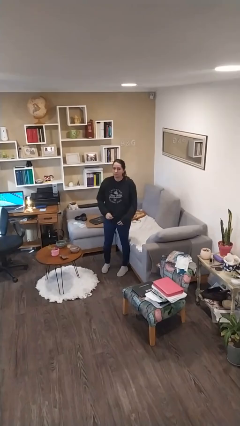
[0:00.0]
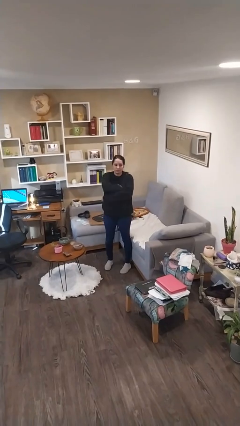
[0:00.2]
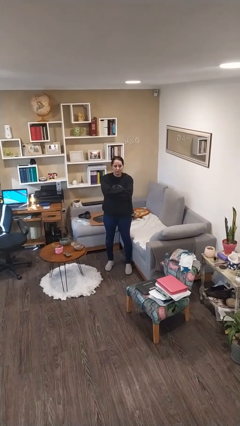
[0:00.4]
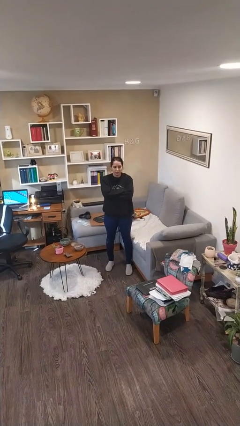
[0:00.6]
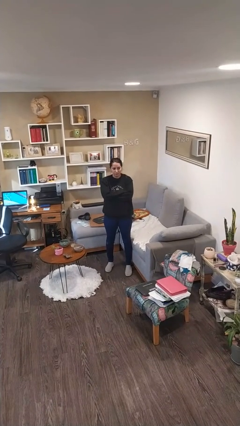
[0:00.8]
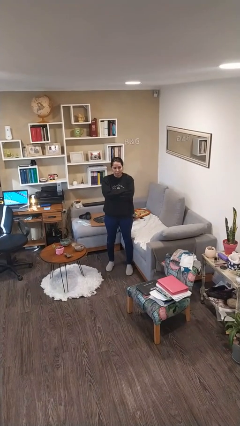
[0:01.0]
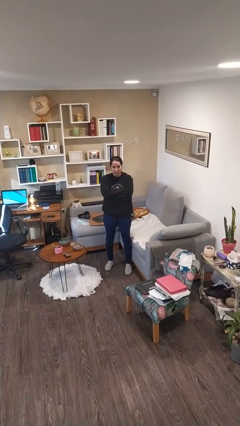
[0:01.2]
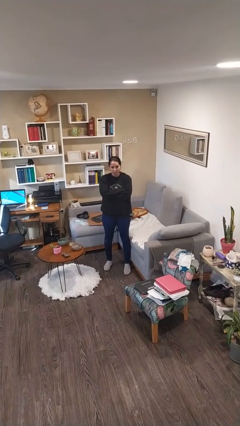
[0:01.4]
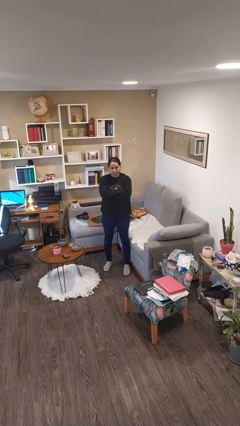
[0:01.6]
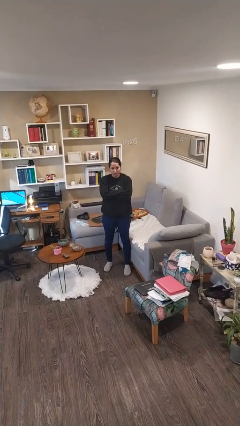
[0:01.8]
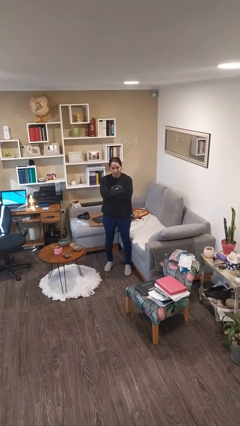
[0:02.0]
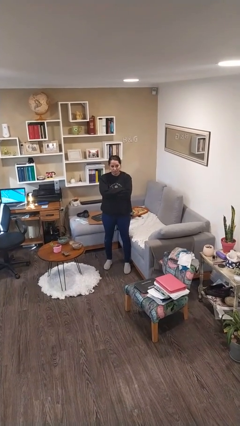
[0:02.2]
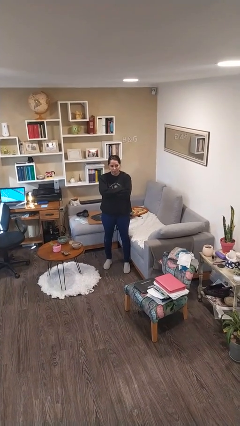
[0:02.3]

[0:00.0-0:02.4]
person crosses arms

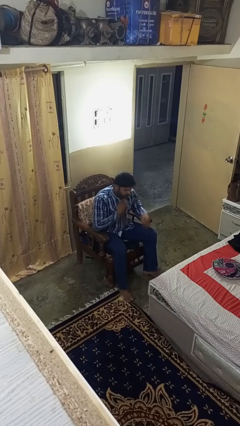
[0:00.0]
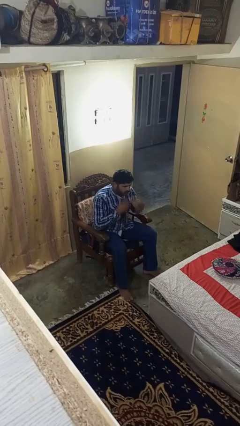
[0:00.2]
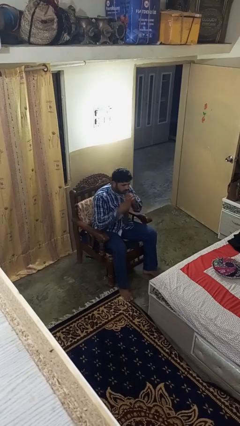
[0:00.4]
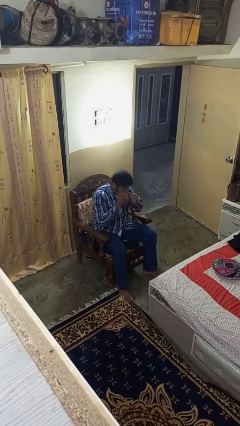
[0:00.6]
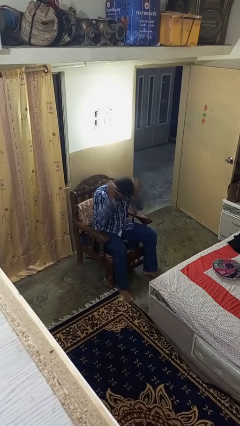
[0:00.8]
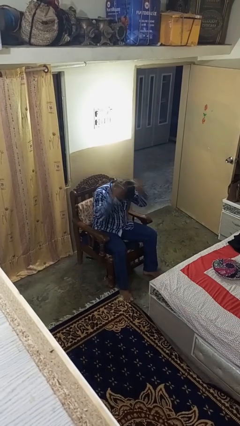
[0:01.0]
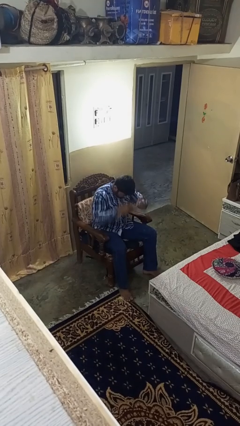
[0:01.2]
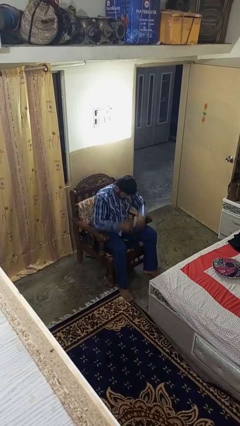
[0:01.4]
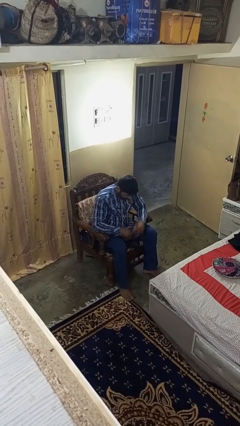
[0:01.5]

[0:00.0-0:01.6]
person takes off necktie

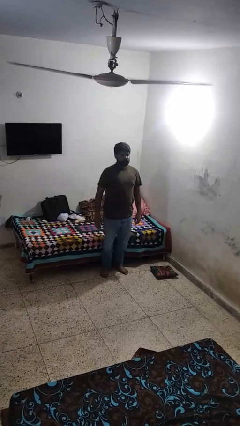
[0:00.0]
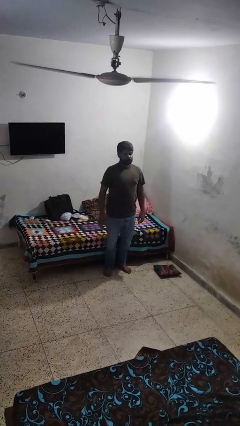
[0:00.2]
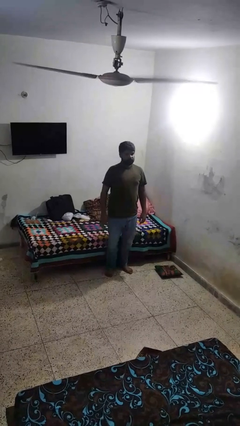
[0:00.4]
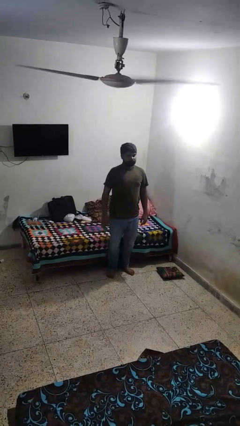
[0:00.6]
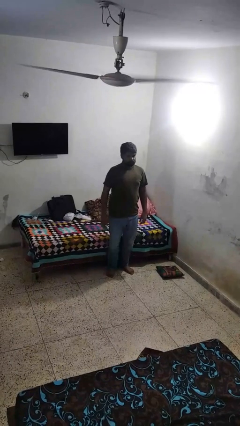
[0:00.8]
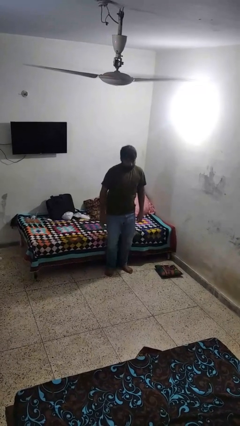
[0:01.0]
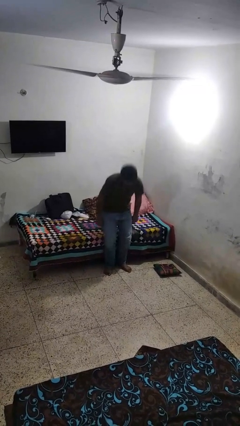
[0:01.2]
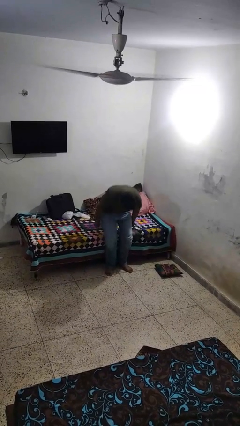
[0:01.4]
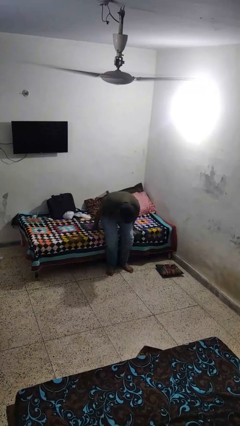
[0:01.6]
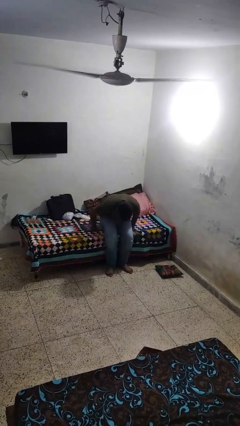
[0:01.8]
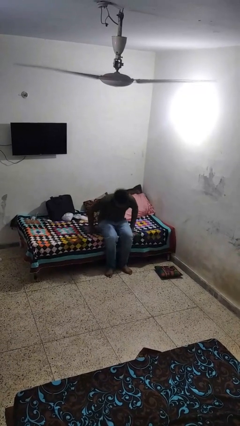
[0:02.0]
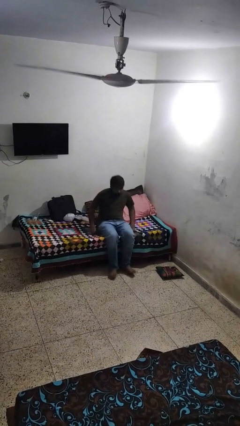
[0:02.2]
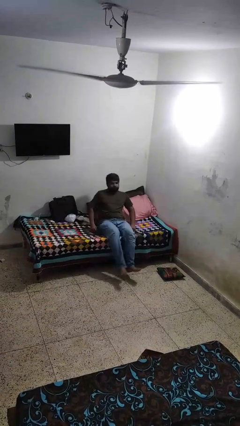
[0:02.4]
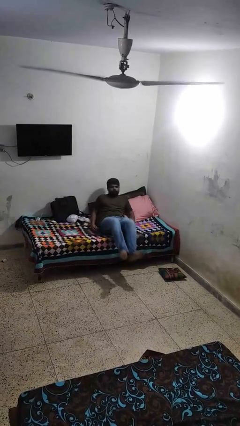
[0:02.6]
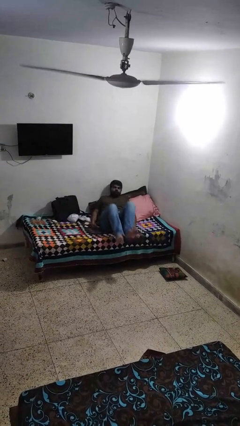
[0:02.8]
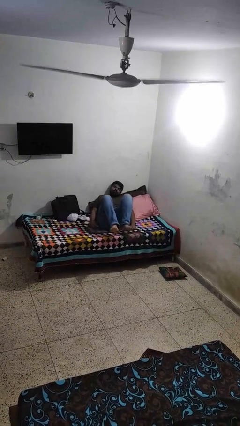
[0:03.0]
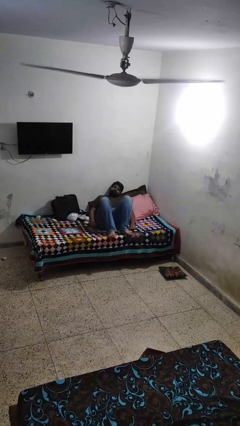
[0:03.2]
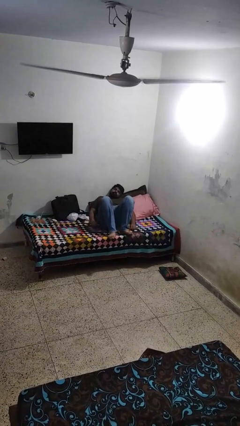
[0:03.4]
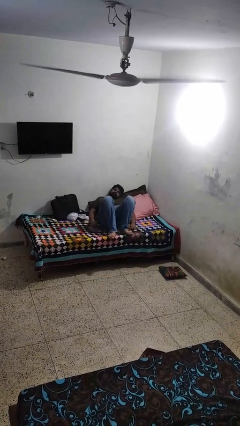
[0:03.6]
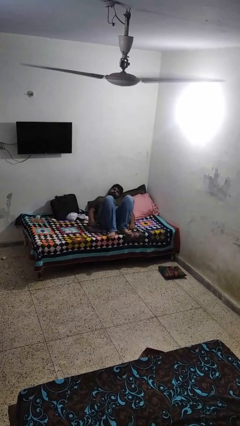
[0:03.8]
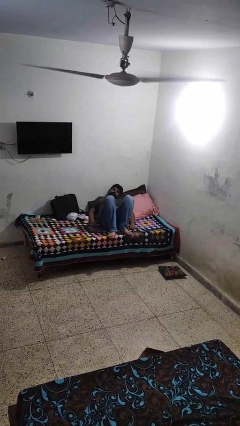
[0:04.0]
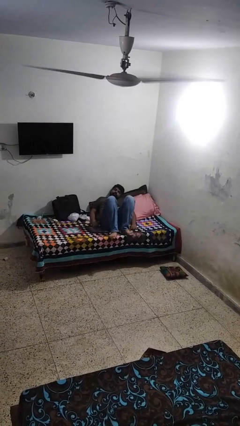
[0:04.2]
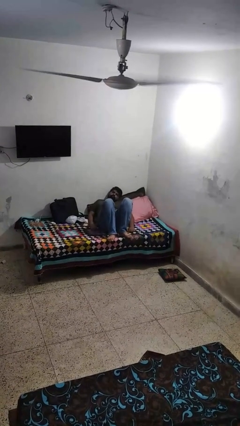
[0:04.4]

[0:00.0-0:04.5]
person lies down on bed

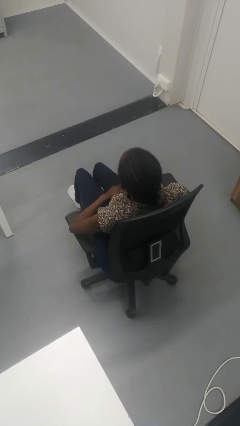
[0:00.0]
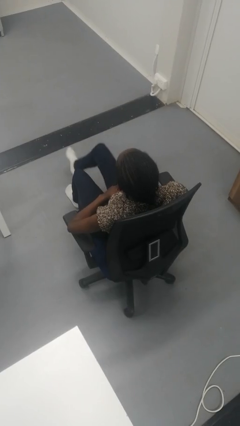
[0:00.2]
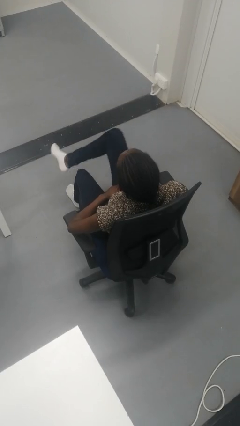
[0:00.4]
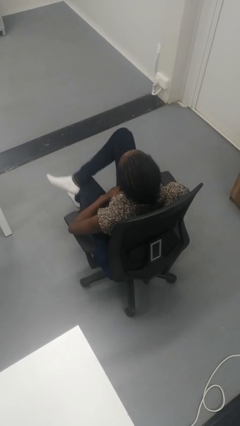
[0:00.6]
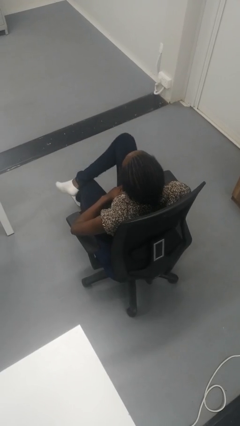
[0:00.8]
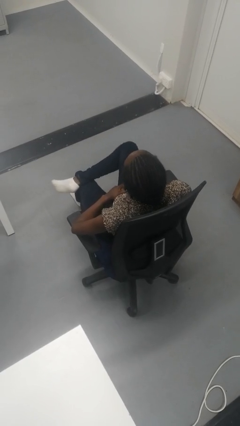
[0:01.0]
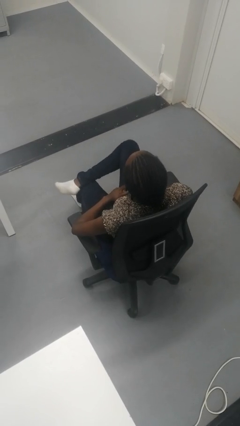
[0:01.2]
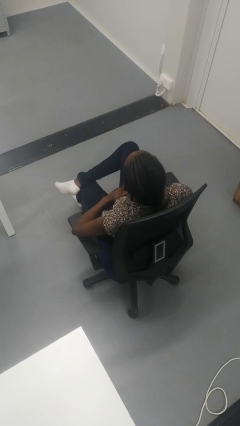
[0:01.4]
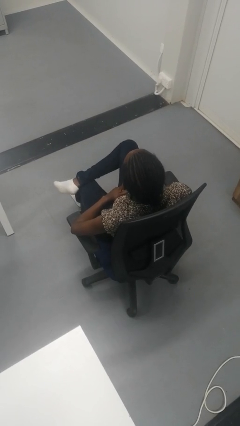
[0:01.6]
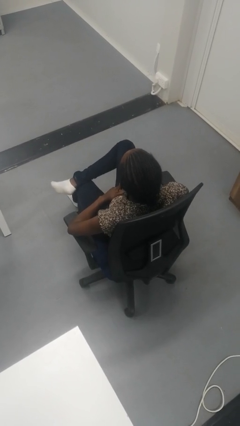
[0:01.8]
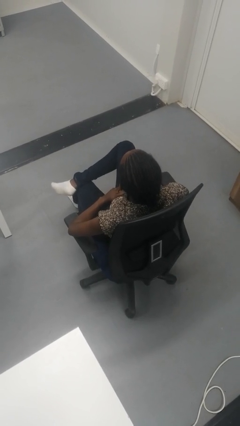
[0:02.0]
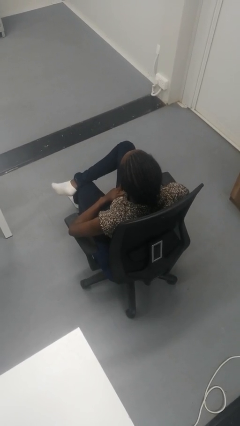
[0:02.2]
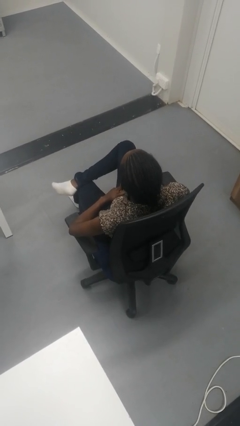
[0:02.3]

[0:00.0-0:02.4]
person crosses legs

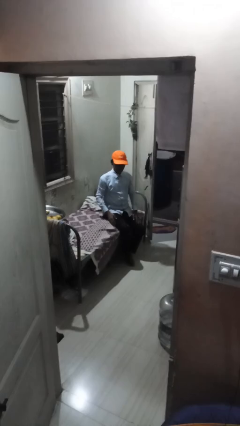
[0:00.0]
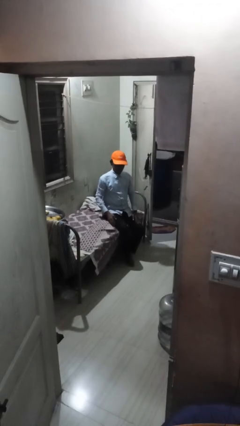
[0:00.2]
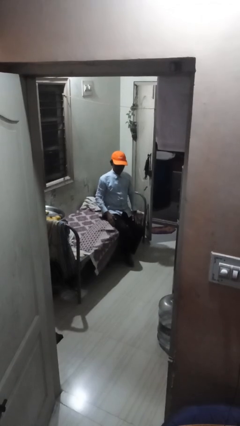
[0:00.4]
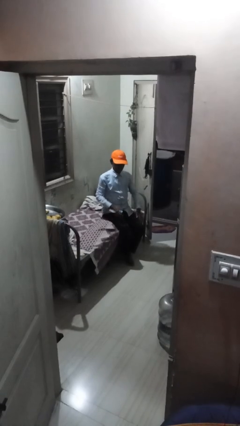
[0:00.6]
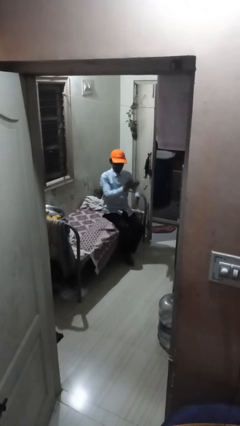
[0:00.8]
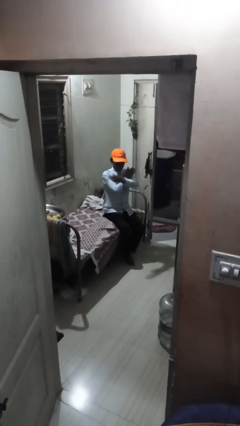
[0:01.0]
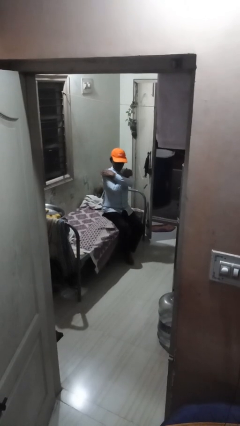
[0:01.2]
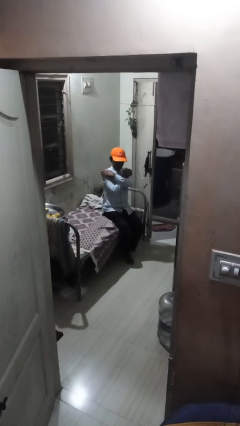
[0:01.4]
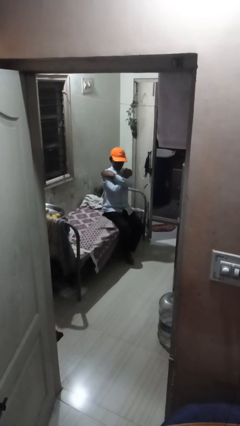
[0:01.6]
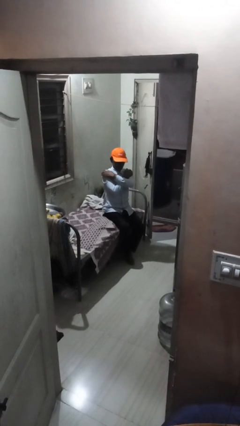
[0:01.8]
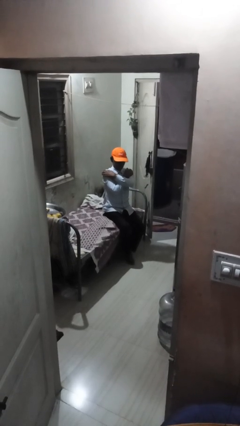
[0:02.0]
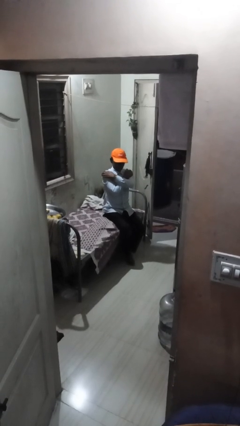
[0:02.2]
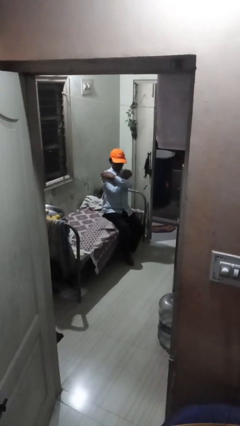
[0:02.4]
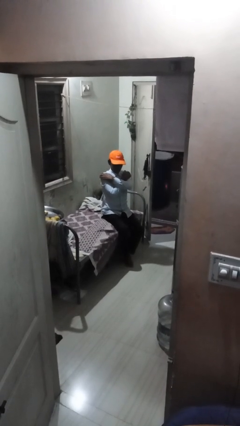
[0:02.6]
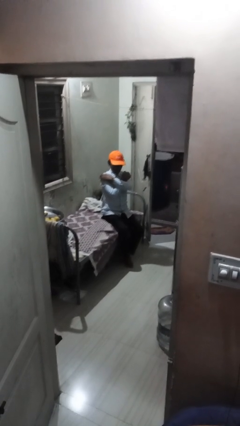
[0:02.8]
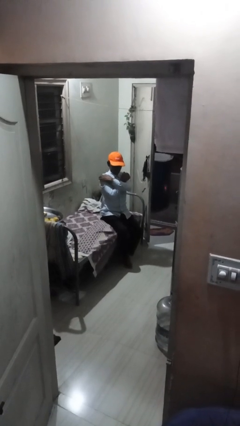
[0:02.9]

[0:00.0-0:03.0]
person gestures arms x

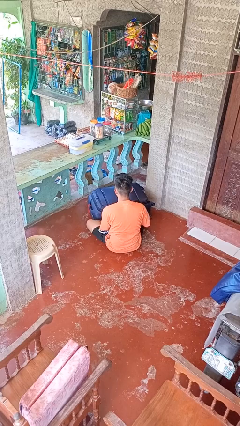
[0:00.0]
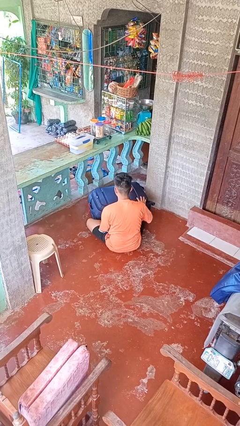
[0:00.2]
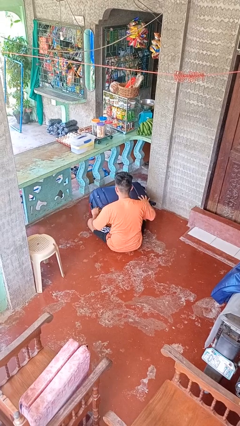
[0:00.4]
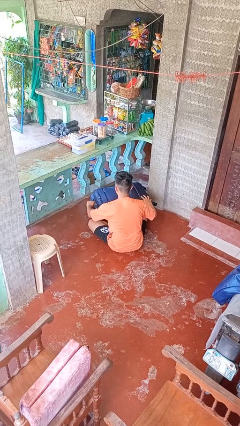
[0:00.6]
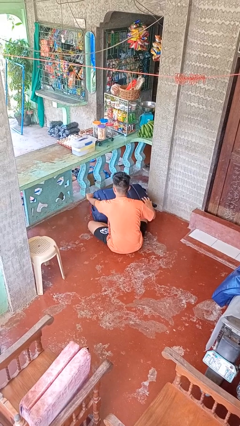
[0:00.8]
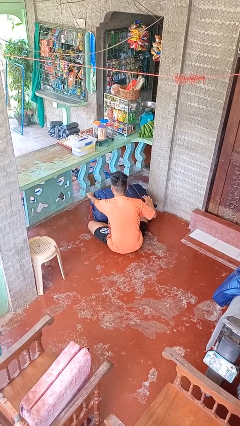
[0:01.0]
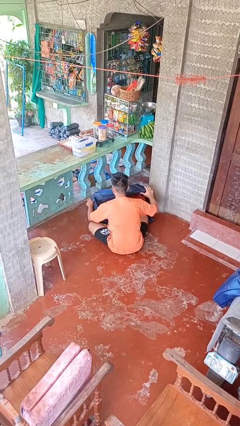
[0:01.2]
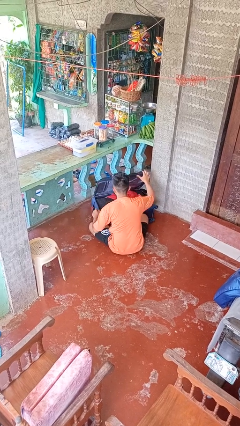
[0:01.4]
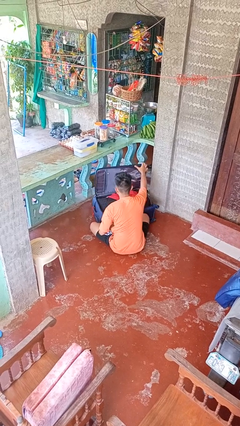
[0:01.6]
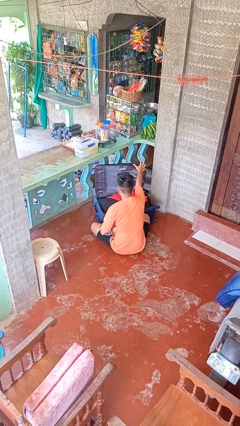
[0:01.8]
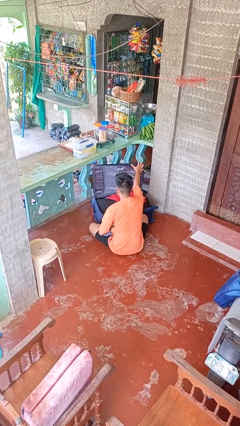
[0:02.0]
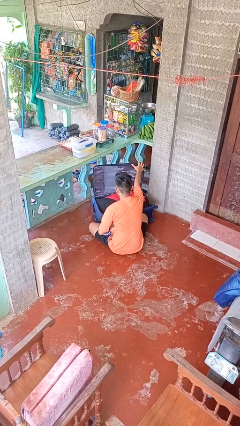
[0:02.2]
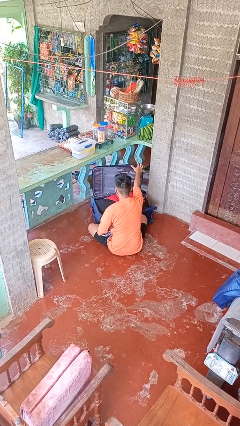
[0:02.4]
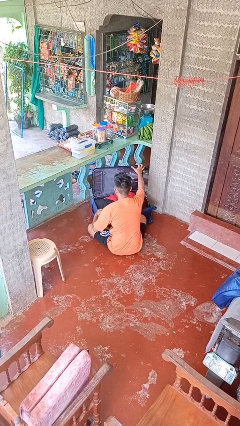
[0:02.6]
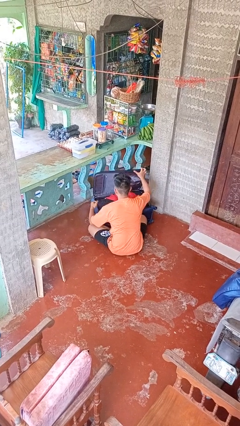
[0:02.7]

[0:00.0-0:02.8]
person opens suitcase

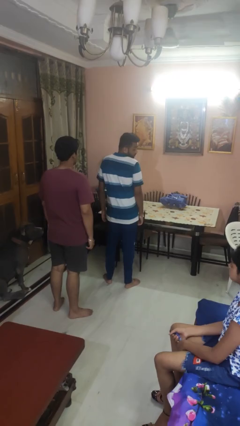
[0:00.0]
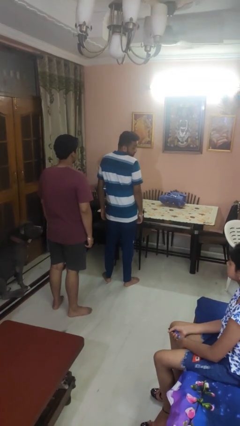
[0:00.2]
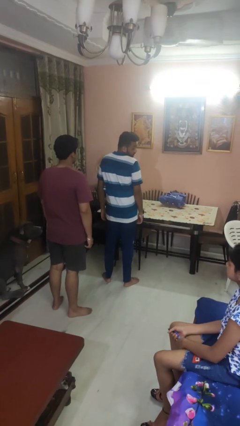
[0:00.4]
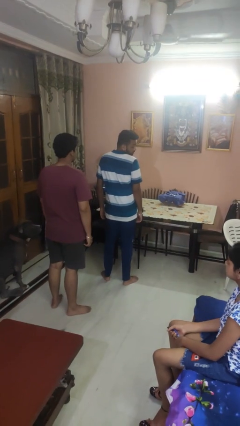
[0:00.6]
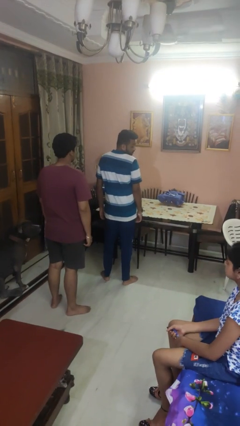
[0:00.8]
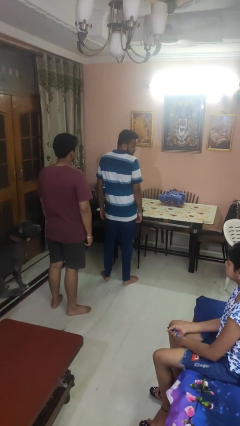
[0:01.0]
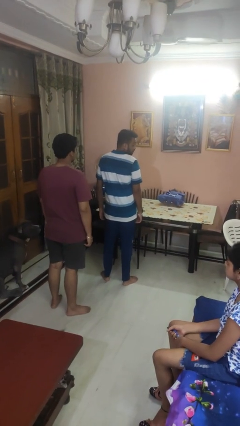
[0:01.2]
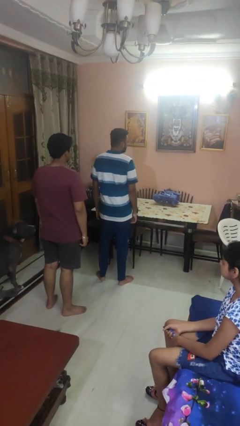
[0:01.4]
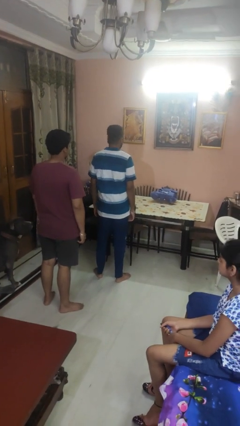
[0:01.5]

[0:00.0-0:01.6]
person looks over shoulder
